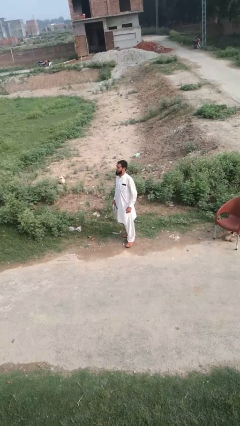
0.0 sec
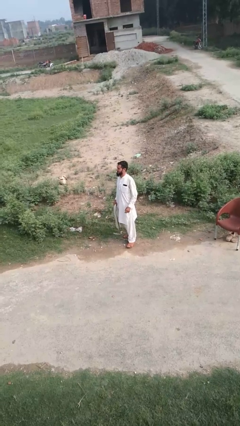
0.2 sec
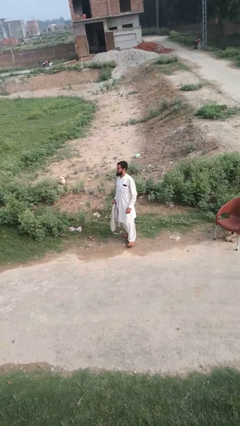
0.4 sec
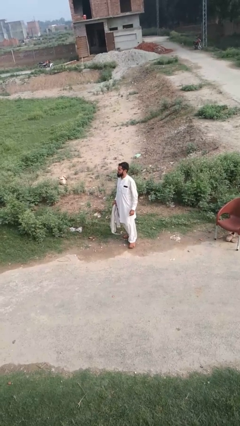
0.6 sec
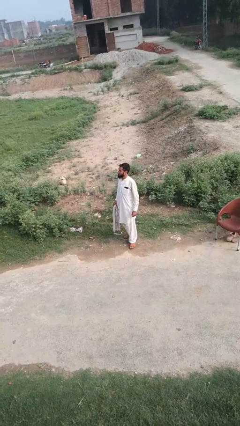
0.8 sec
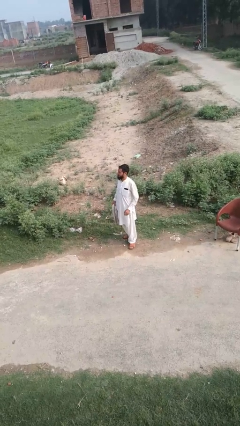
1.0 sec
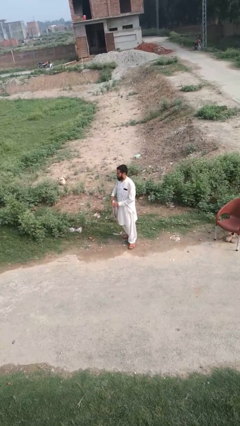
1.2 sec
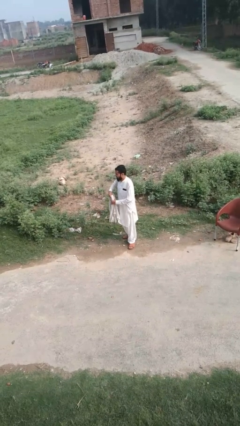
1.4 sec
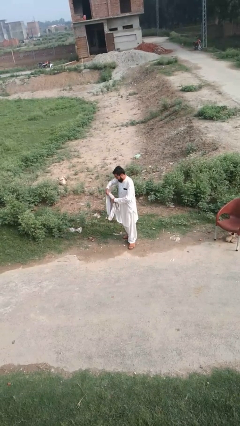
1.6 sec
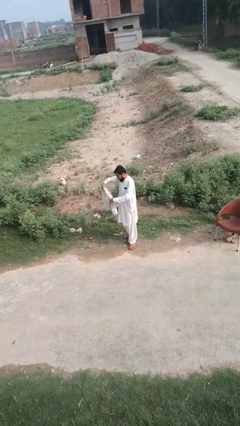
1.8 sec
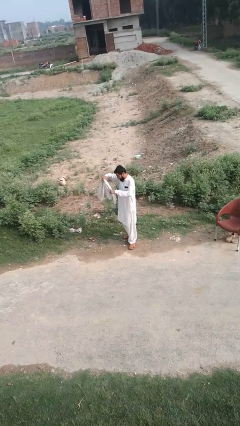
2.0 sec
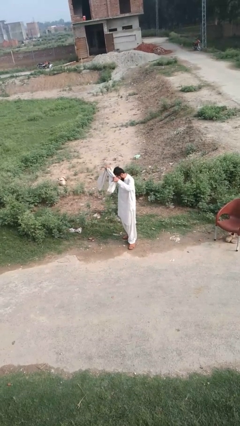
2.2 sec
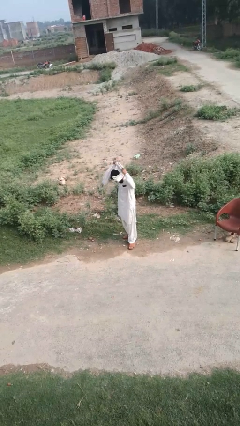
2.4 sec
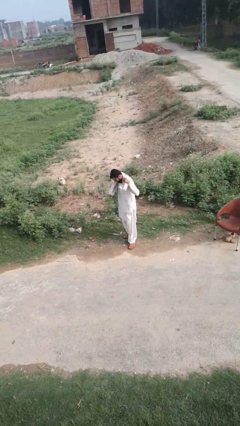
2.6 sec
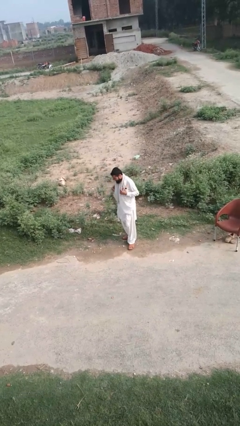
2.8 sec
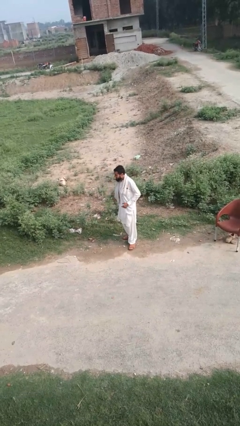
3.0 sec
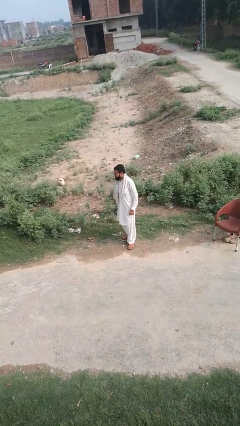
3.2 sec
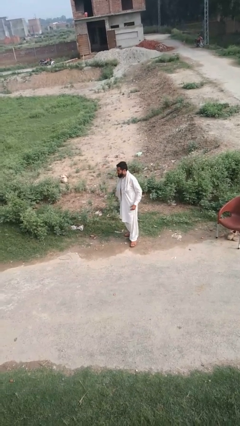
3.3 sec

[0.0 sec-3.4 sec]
person puts on scarf

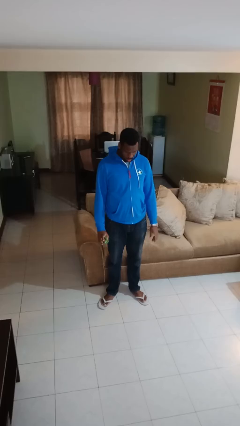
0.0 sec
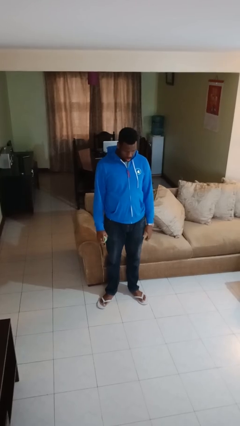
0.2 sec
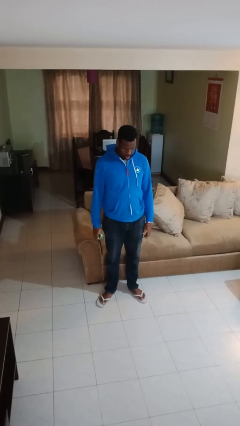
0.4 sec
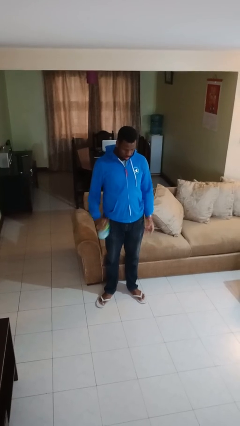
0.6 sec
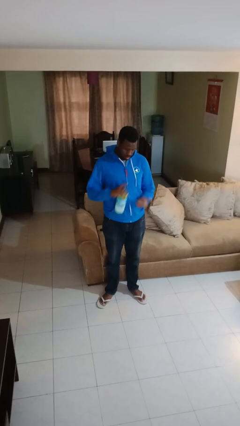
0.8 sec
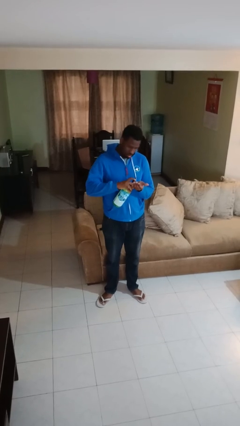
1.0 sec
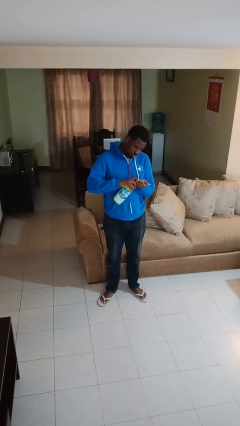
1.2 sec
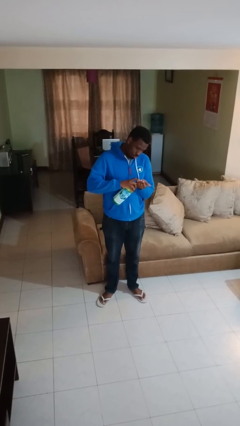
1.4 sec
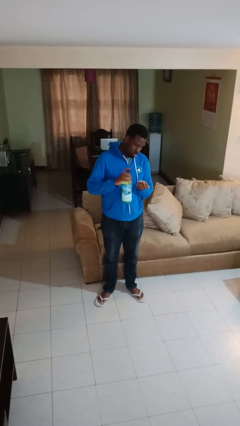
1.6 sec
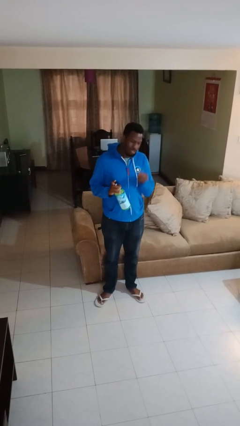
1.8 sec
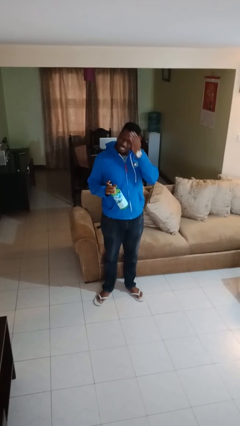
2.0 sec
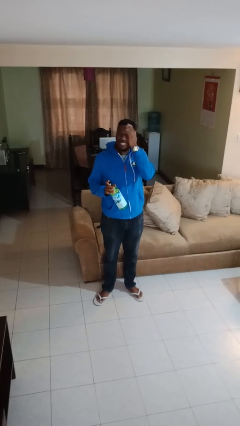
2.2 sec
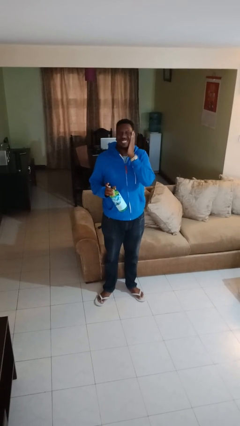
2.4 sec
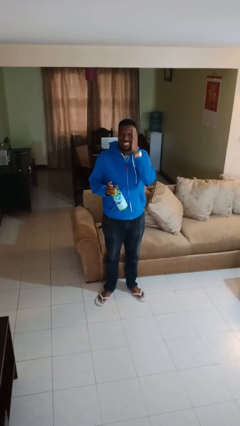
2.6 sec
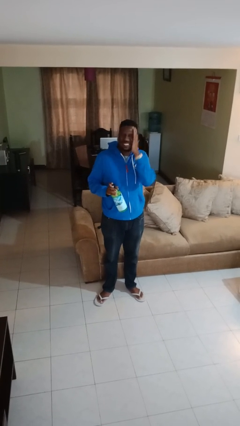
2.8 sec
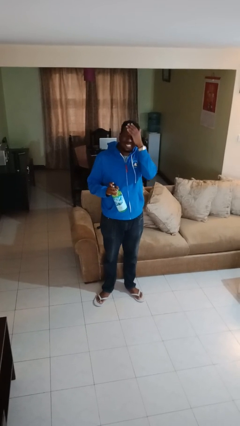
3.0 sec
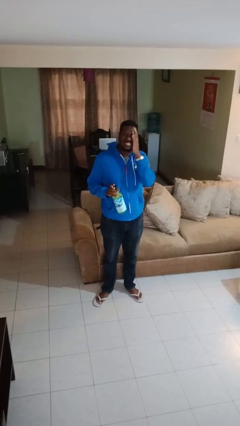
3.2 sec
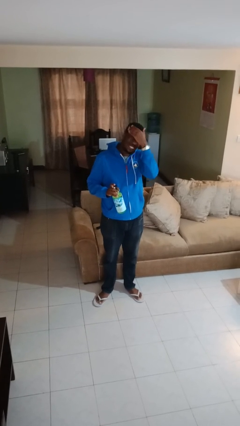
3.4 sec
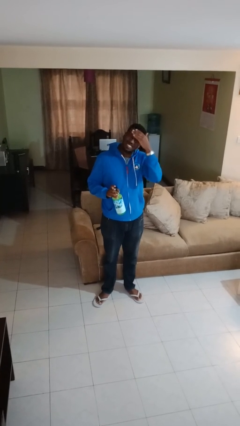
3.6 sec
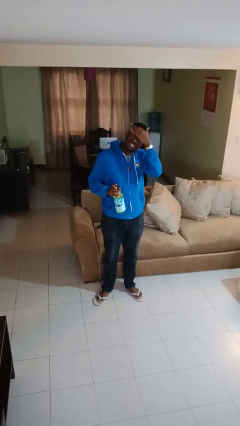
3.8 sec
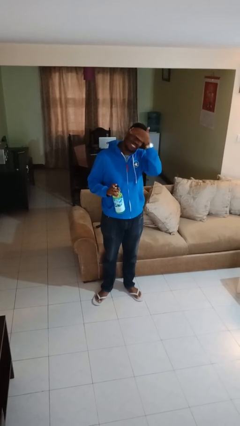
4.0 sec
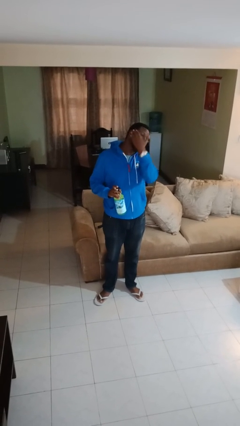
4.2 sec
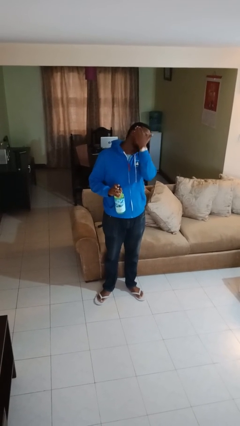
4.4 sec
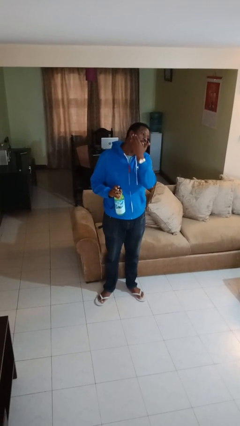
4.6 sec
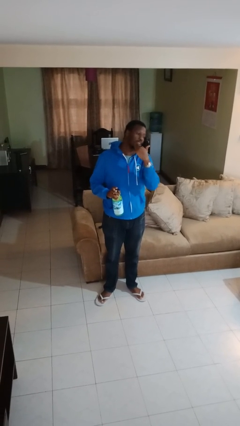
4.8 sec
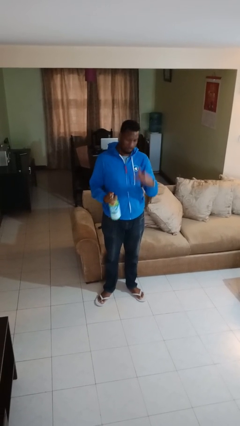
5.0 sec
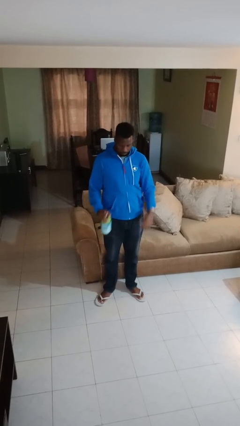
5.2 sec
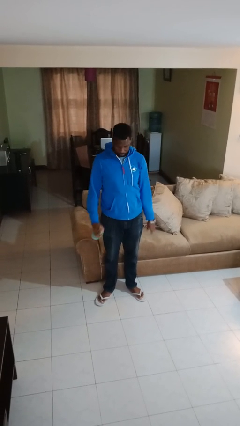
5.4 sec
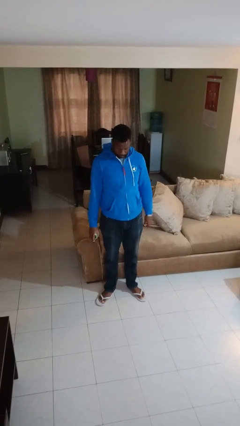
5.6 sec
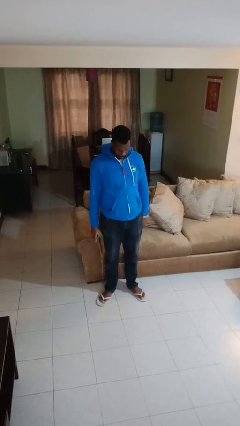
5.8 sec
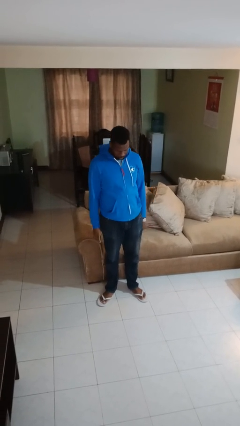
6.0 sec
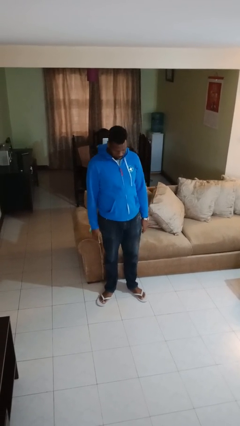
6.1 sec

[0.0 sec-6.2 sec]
person applies facial moisturizer

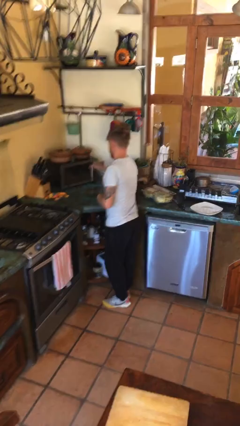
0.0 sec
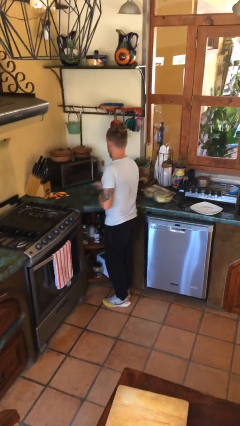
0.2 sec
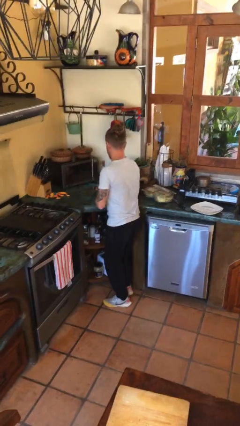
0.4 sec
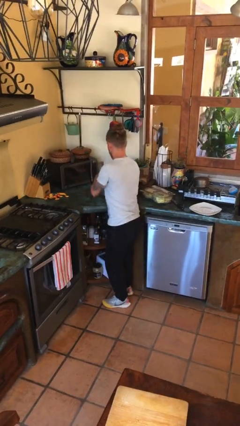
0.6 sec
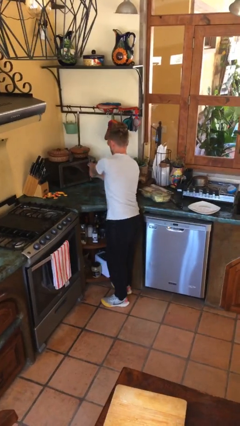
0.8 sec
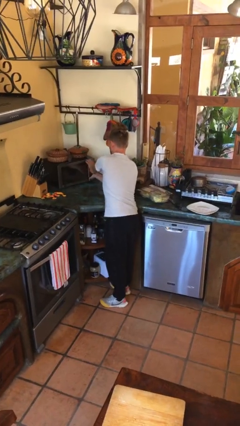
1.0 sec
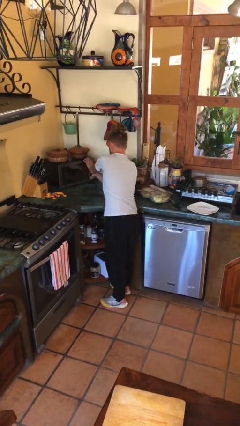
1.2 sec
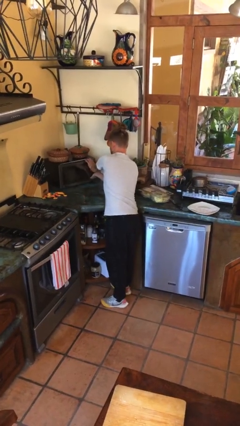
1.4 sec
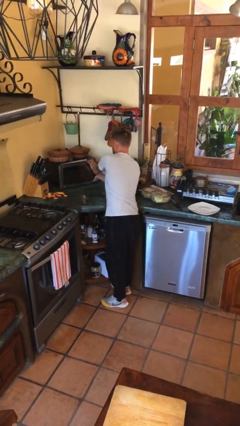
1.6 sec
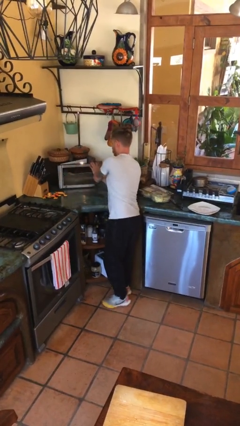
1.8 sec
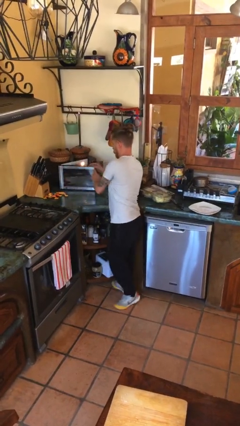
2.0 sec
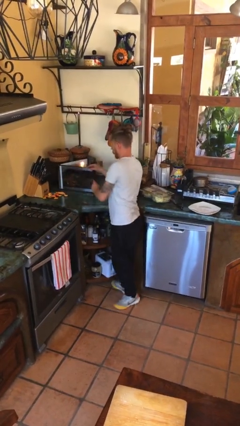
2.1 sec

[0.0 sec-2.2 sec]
person opens microwave

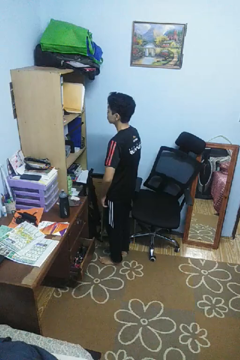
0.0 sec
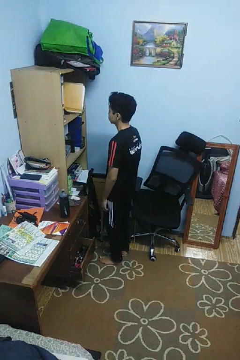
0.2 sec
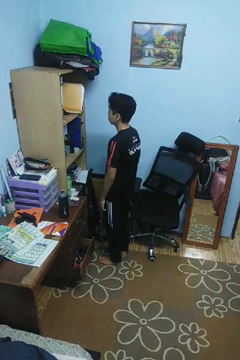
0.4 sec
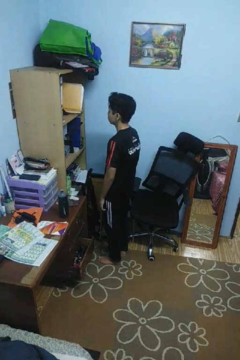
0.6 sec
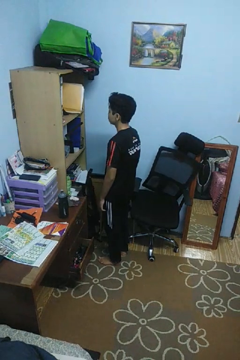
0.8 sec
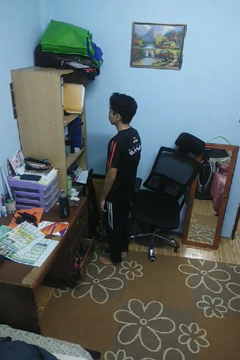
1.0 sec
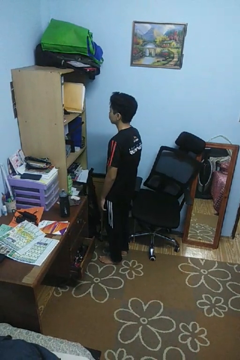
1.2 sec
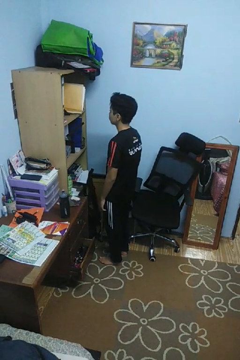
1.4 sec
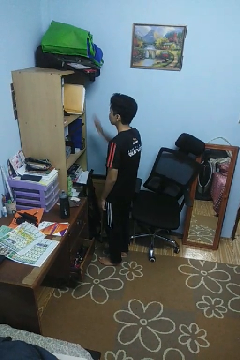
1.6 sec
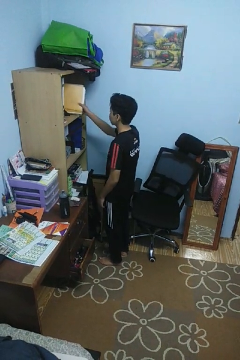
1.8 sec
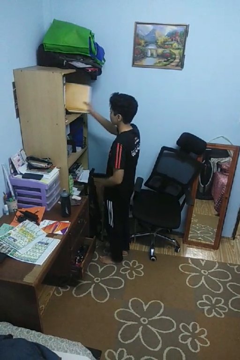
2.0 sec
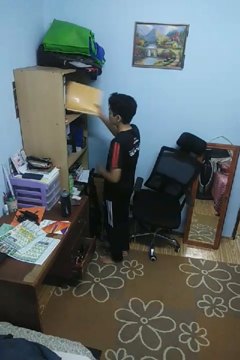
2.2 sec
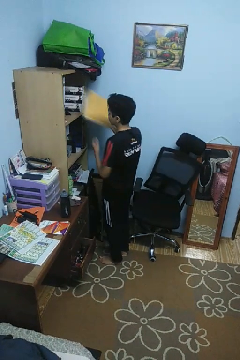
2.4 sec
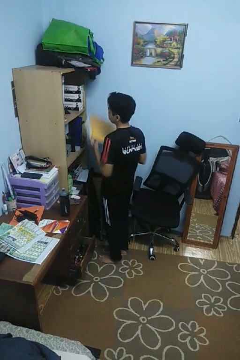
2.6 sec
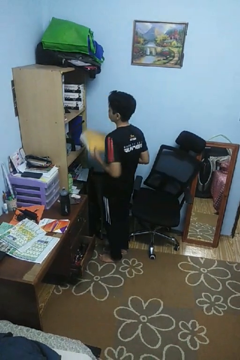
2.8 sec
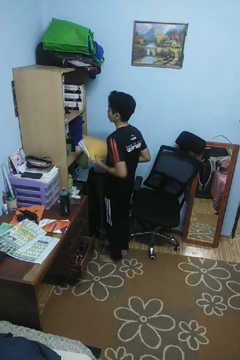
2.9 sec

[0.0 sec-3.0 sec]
person picks up object from cabinet

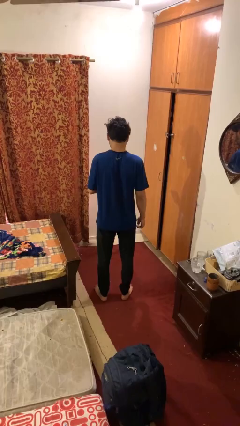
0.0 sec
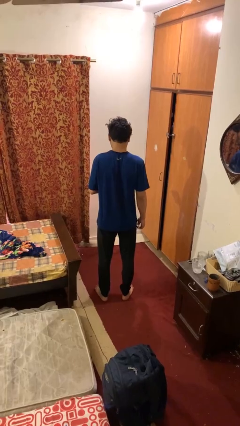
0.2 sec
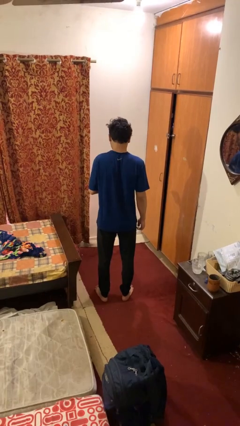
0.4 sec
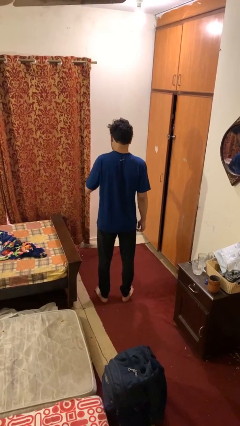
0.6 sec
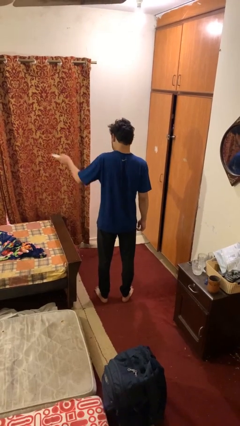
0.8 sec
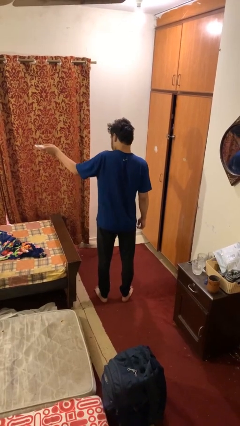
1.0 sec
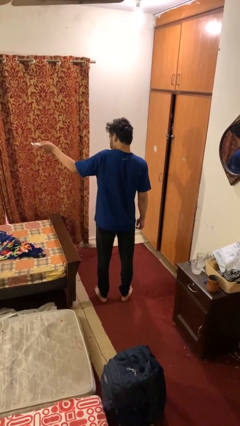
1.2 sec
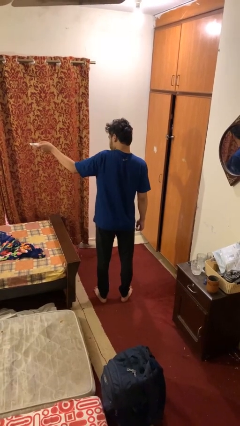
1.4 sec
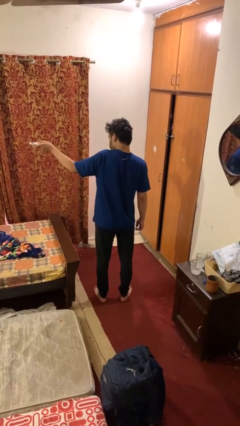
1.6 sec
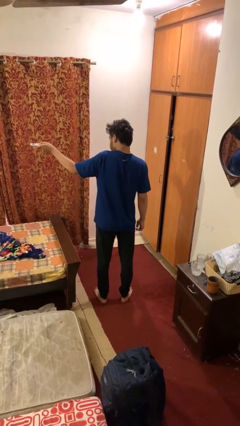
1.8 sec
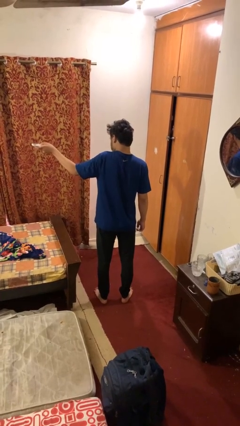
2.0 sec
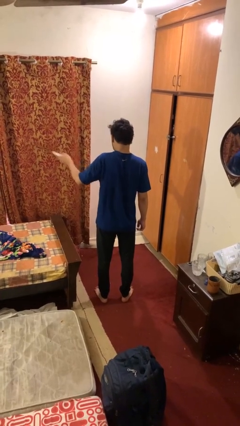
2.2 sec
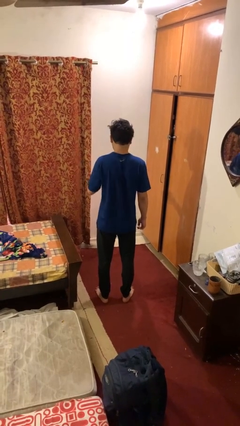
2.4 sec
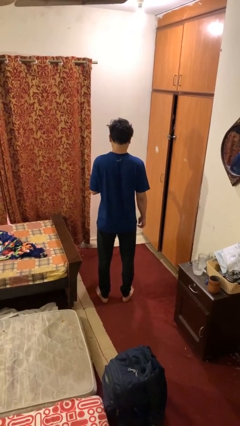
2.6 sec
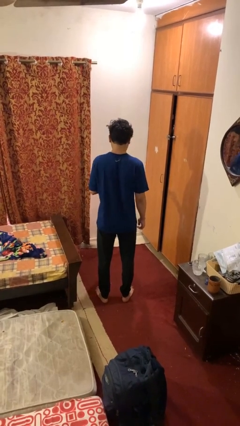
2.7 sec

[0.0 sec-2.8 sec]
person uses television remote
